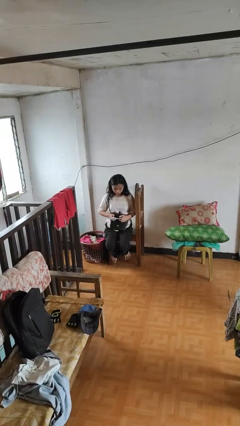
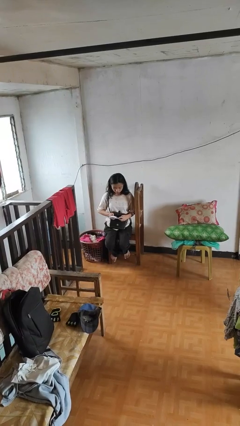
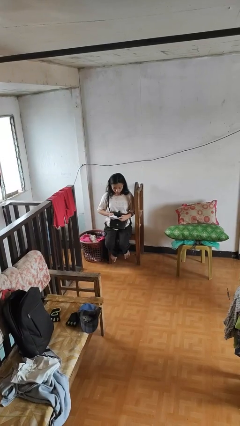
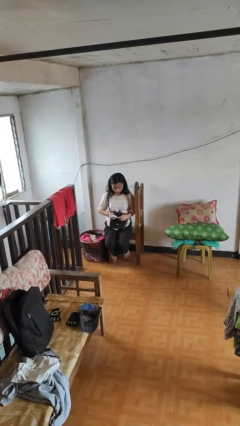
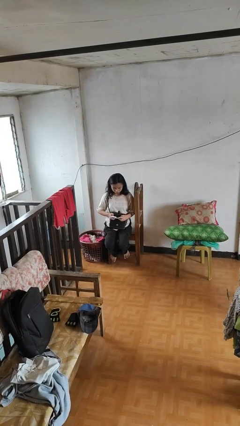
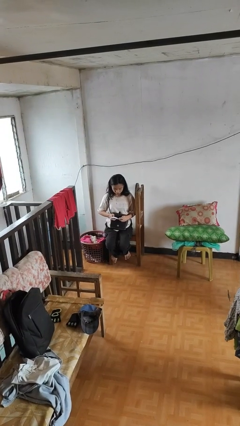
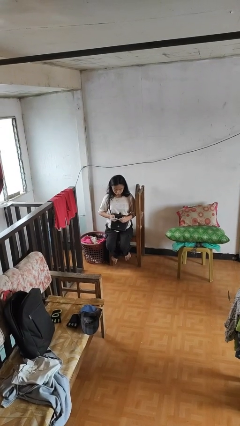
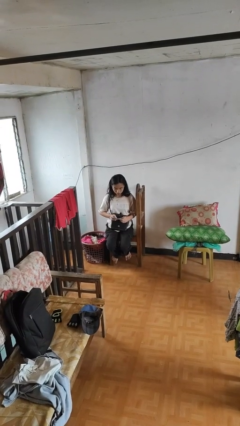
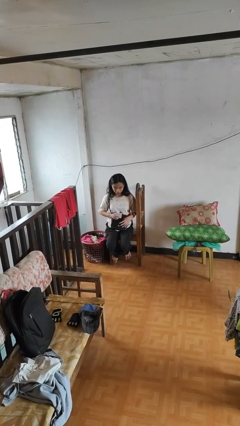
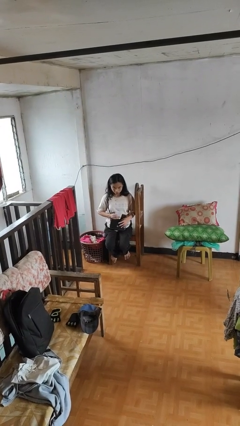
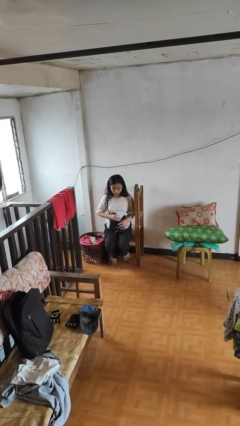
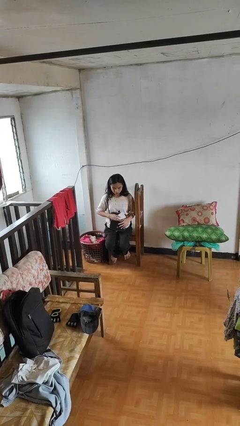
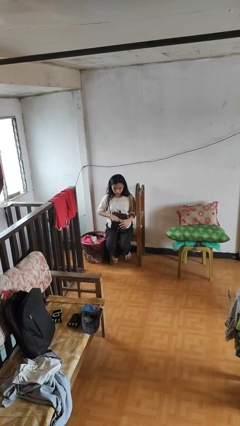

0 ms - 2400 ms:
person takes object from purse

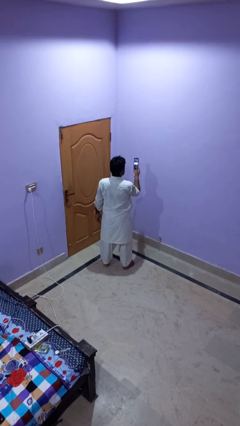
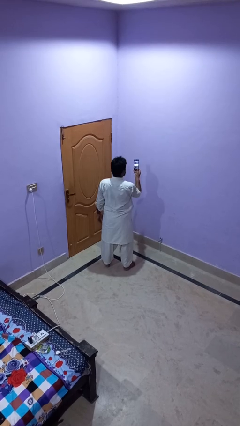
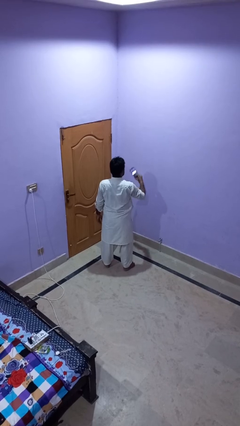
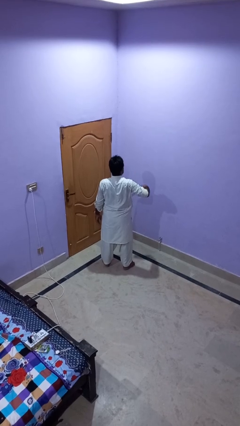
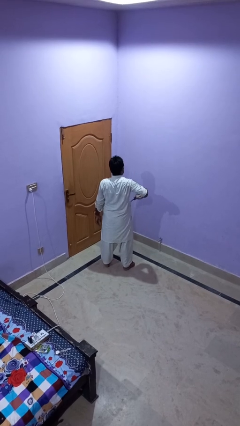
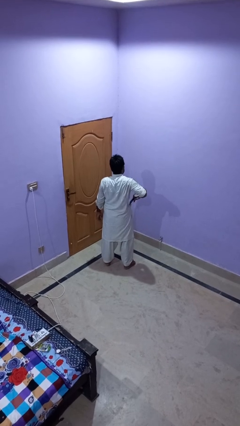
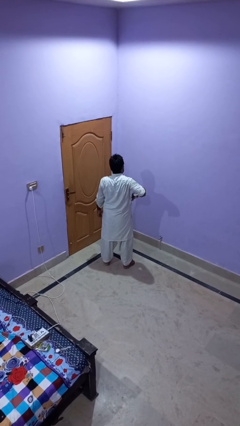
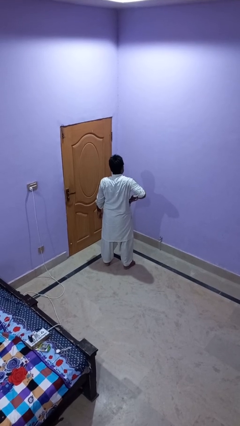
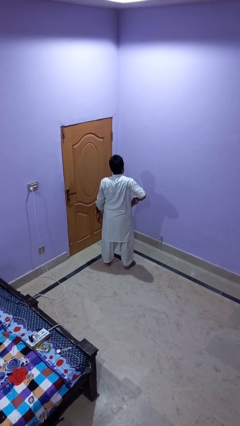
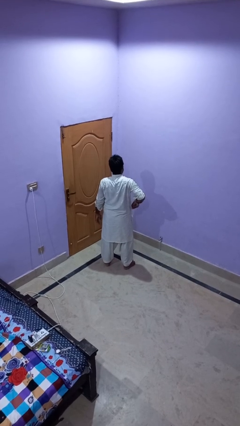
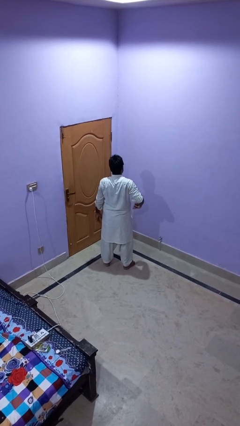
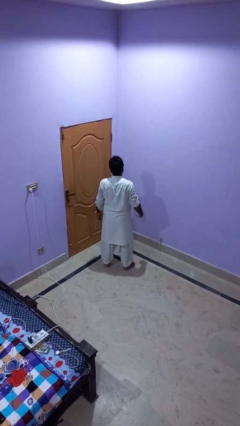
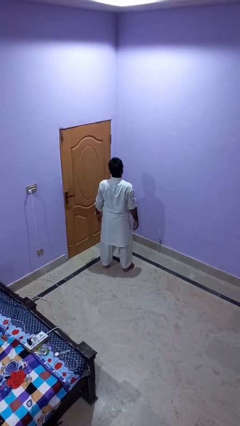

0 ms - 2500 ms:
person puts phone into pocket

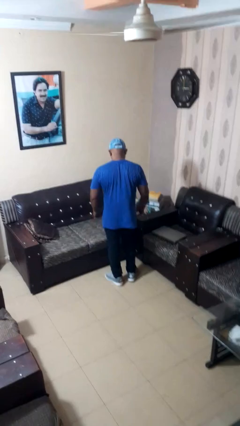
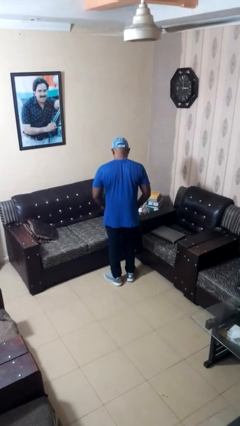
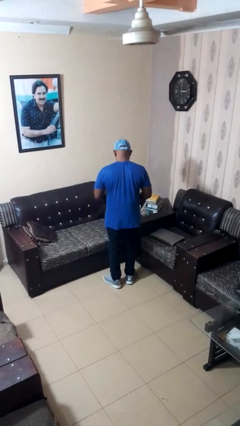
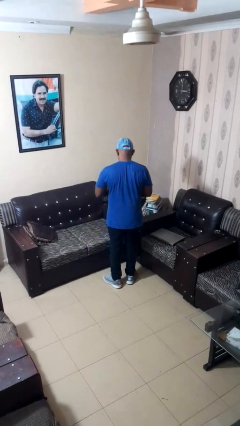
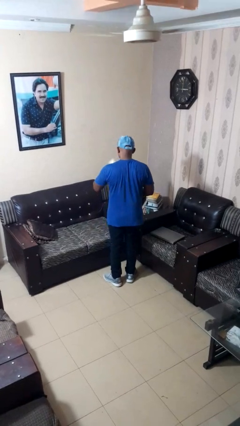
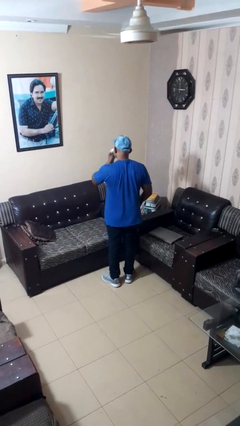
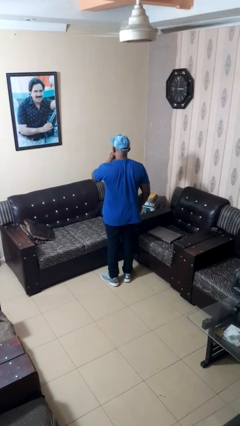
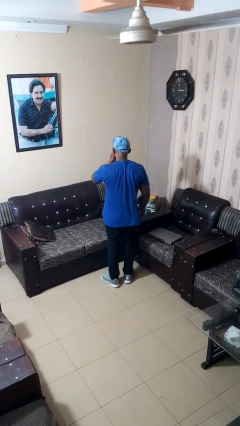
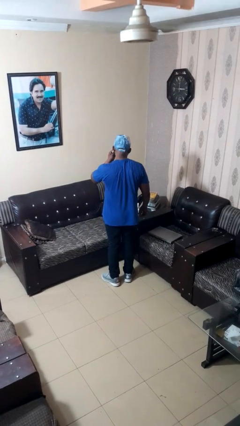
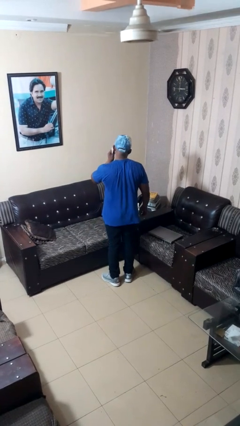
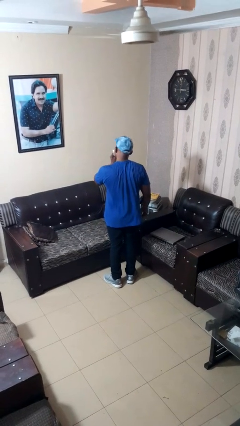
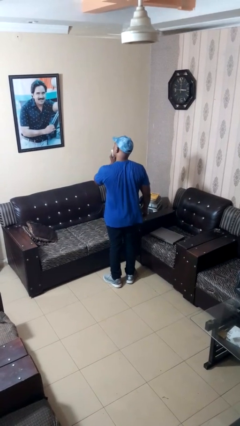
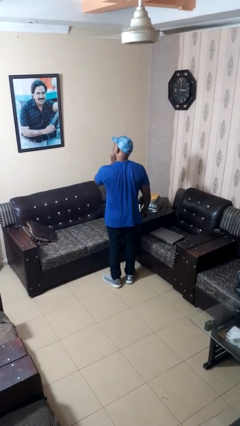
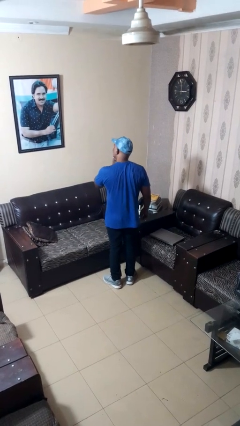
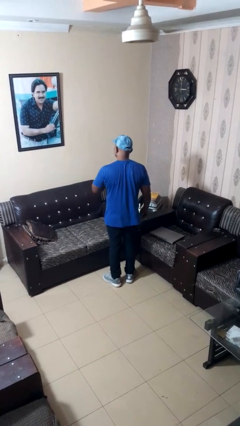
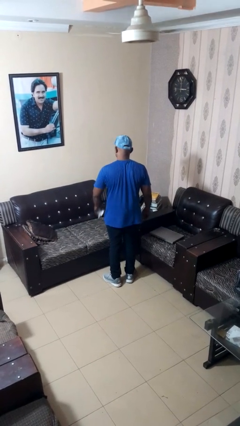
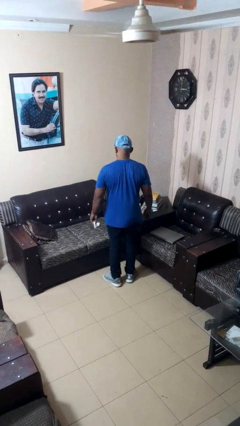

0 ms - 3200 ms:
person wipes mouth with napkin

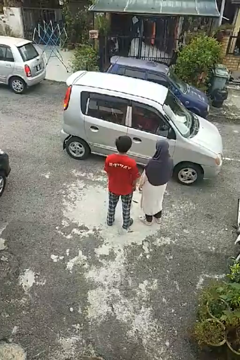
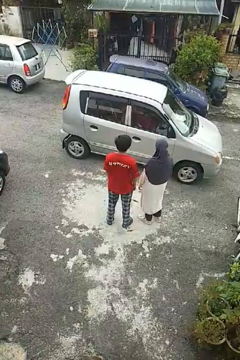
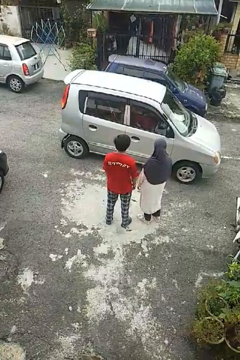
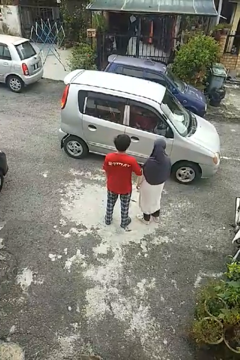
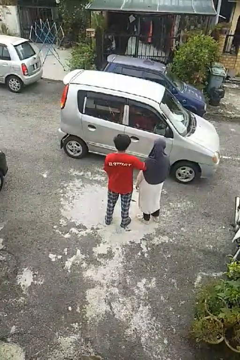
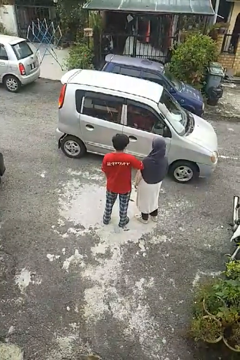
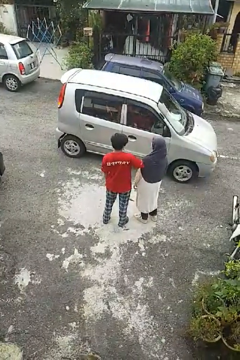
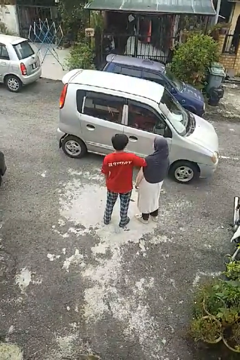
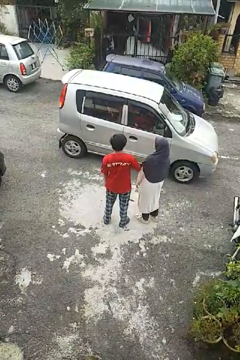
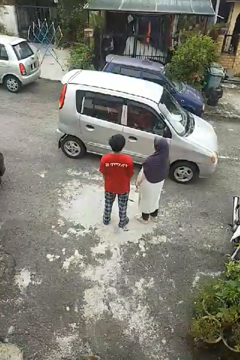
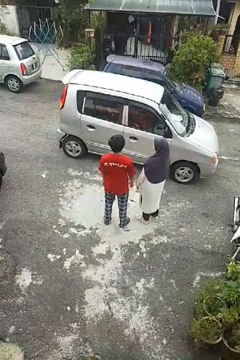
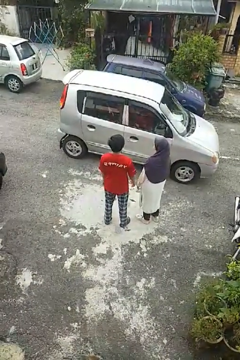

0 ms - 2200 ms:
person nudges person with elbow

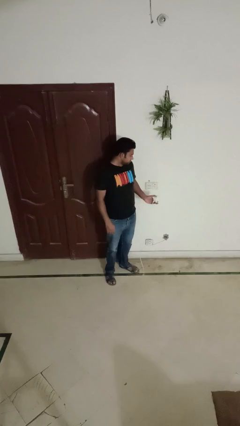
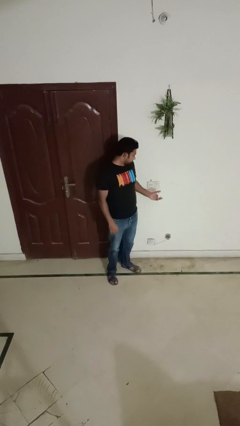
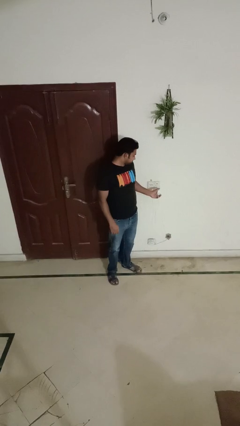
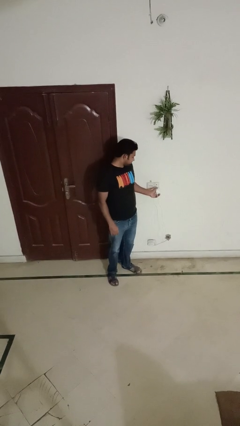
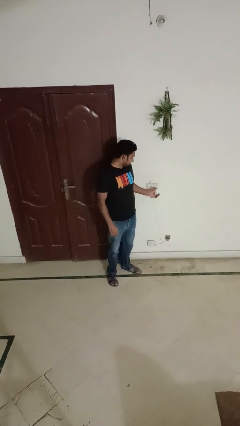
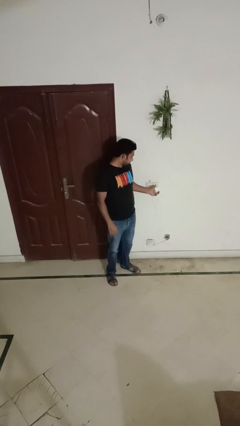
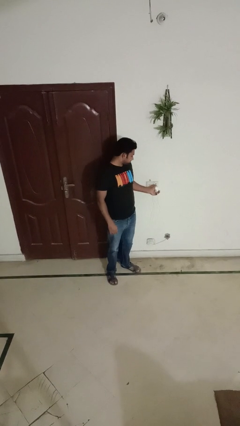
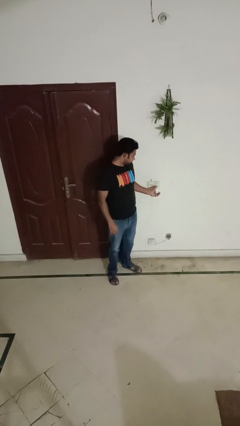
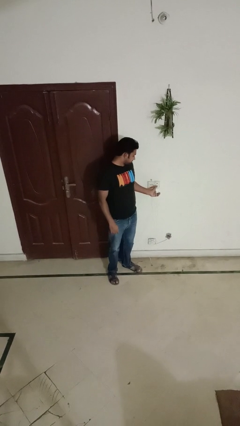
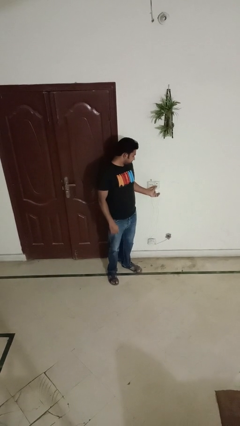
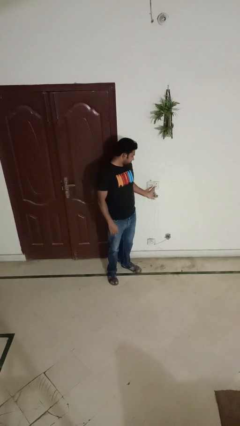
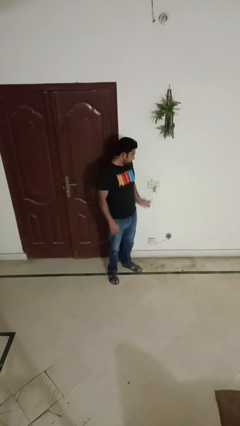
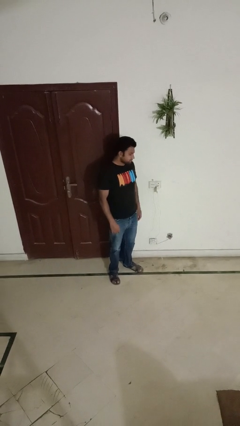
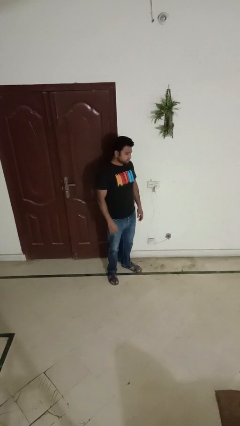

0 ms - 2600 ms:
person plugs into electrical socket

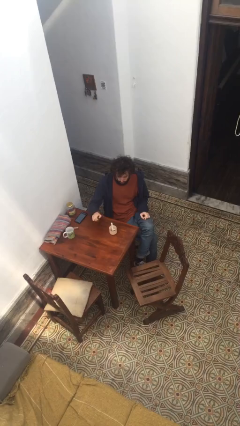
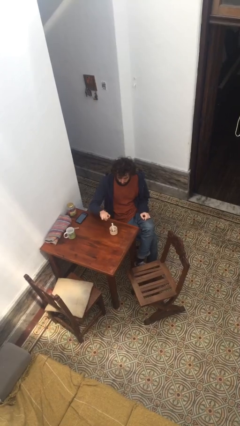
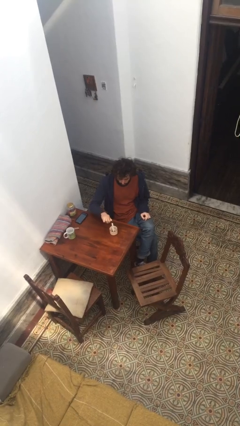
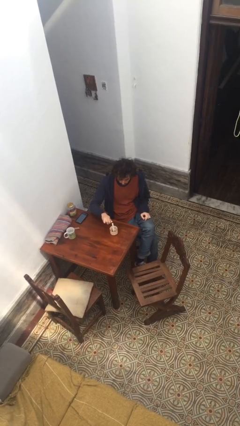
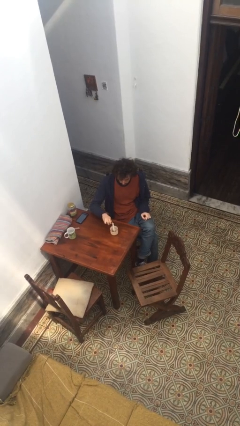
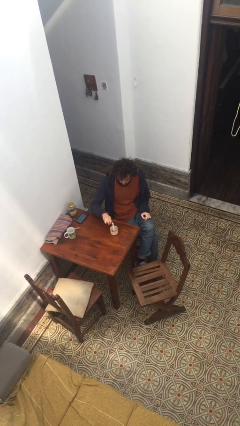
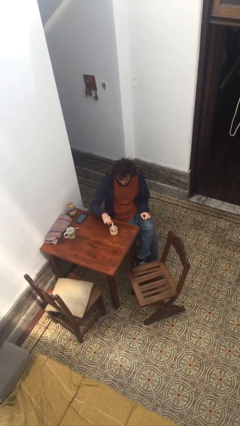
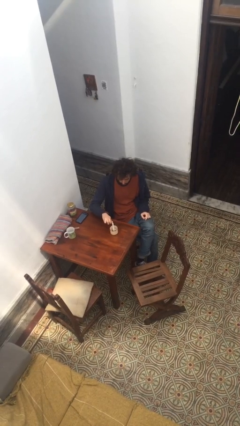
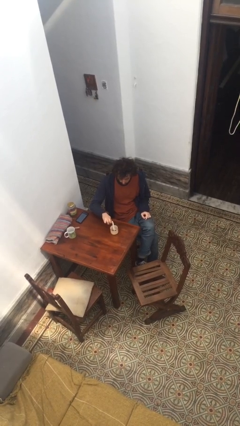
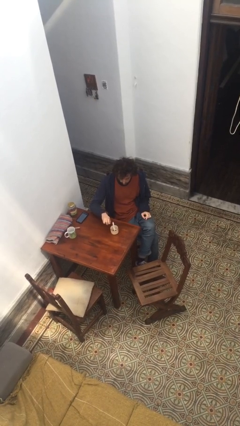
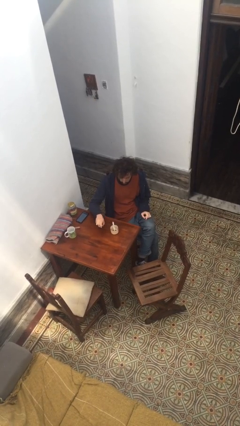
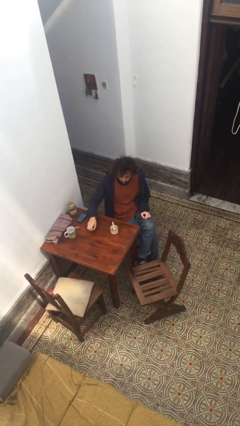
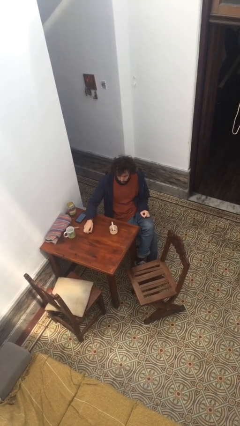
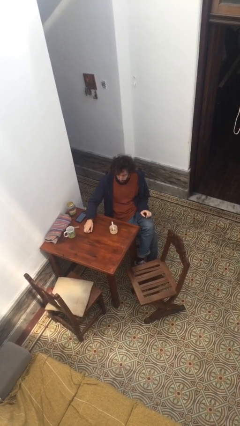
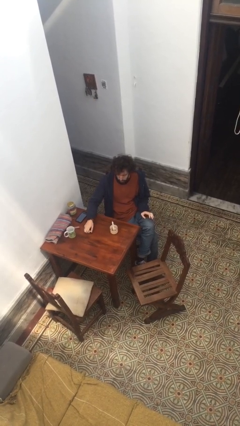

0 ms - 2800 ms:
person lights candle

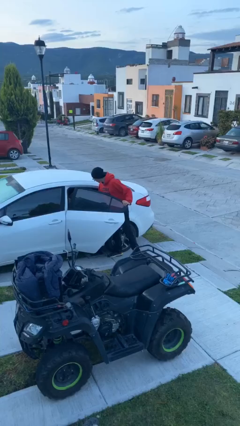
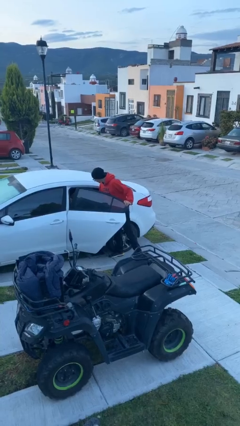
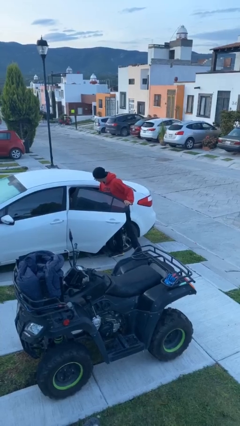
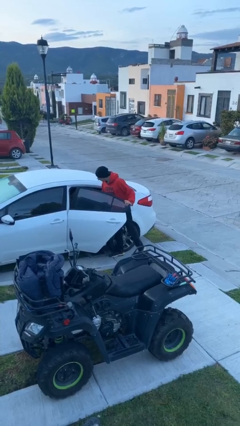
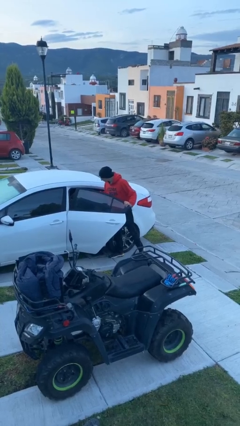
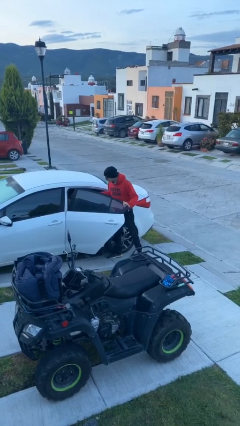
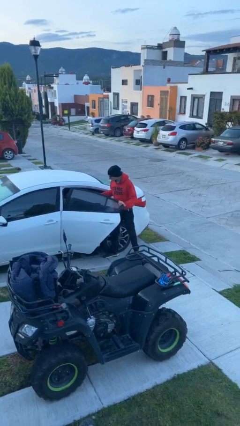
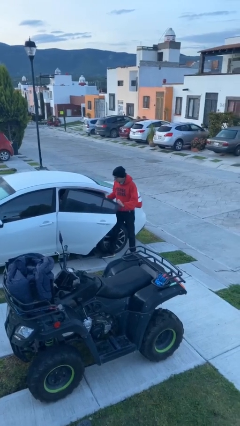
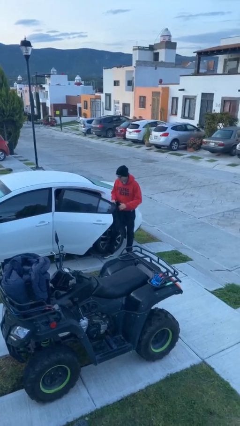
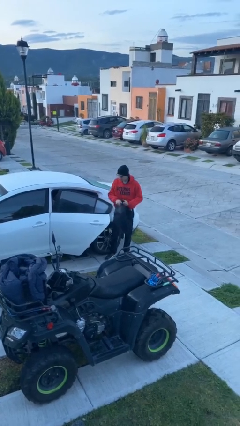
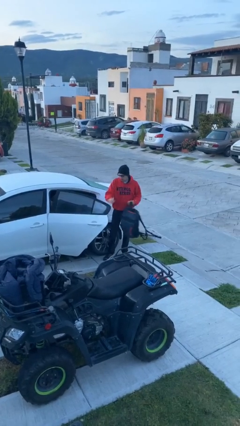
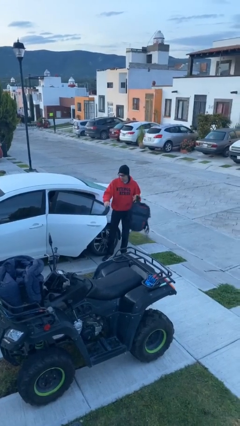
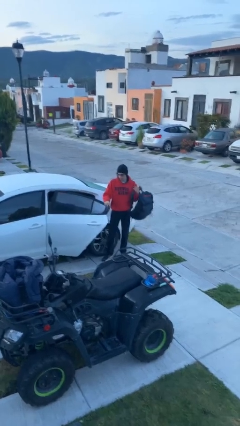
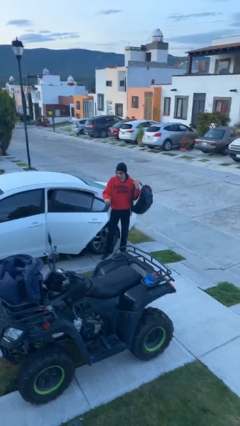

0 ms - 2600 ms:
person unloads car
